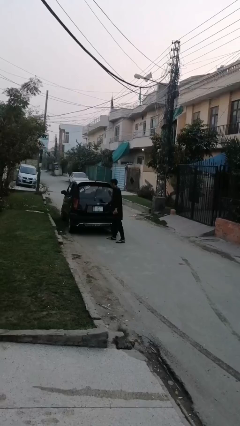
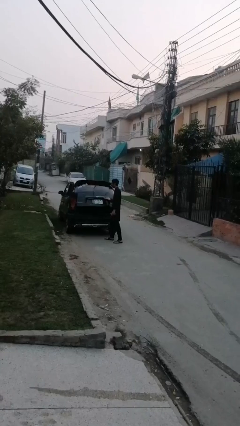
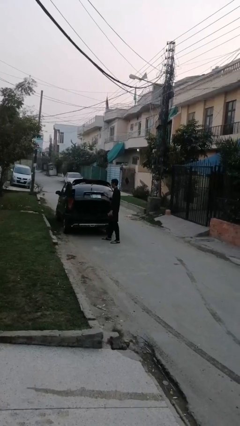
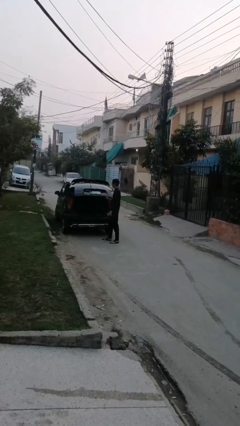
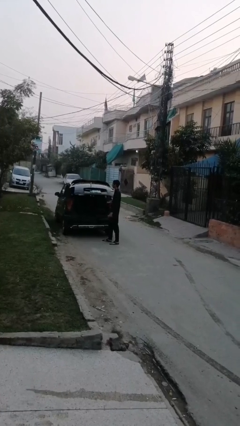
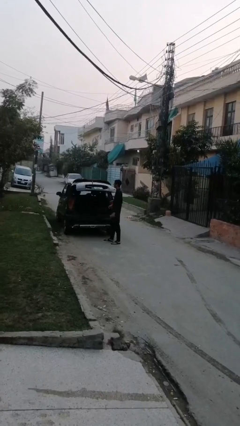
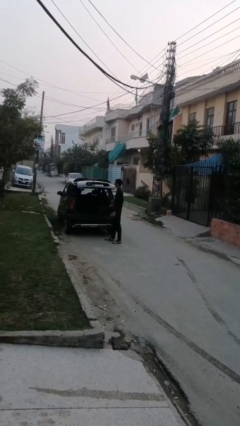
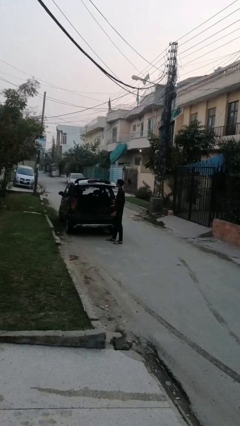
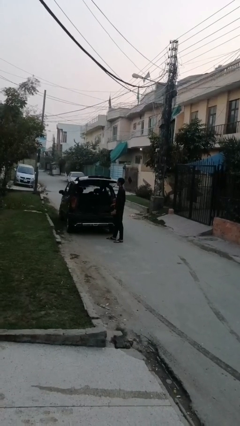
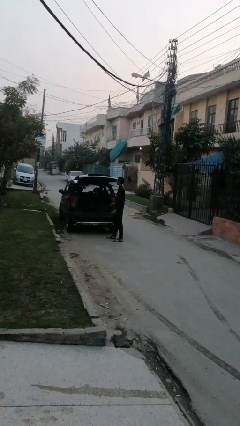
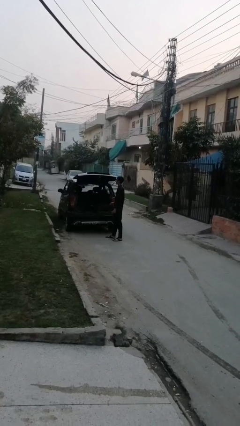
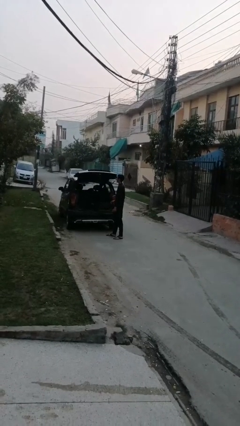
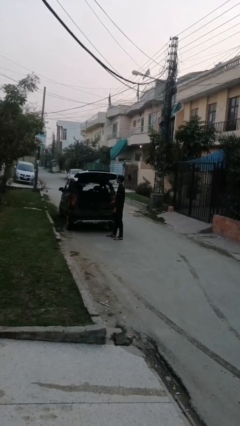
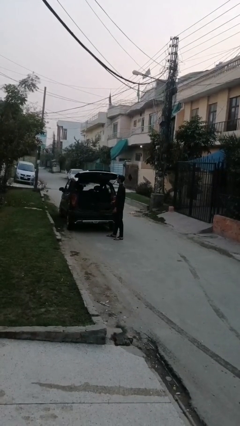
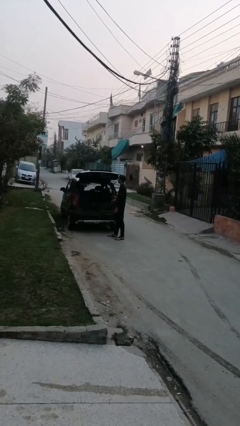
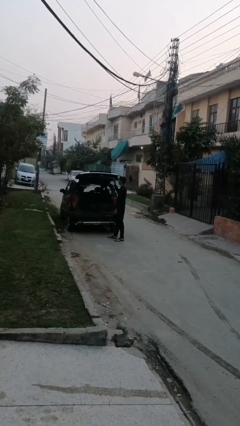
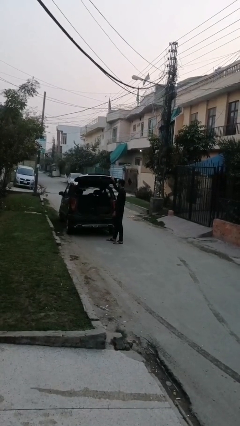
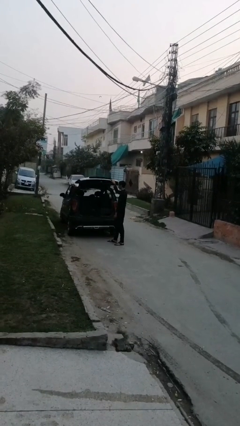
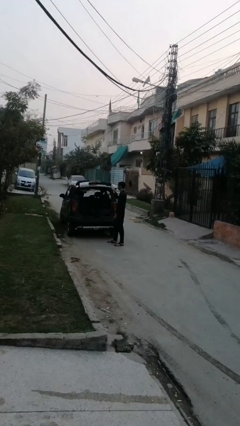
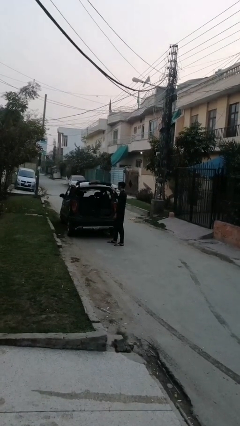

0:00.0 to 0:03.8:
person opens car trunk

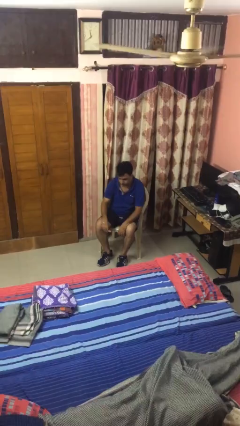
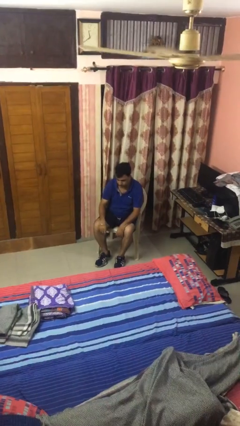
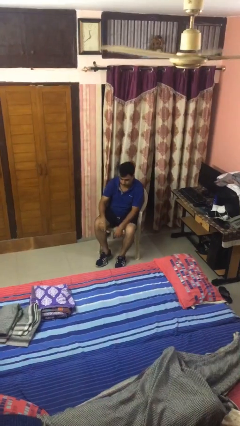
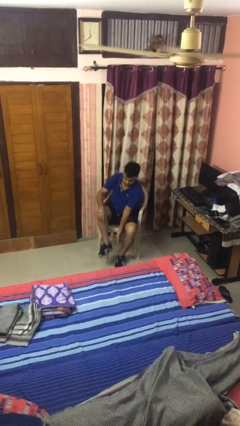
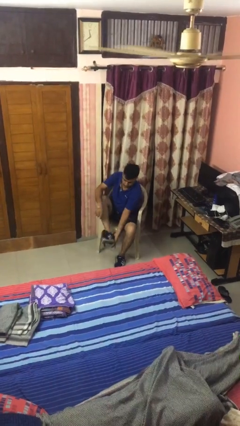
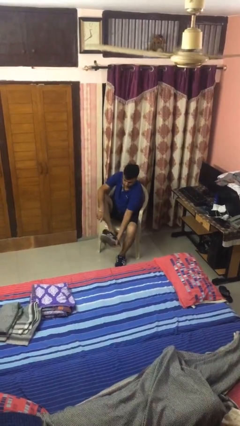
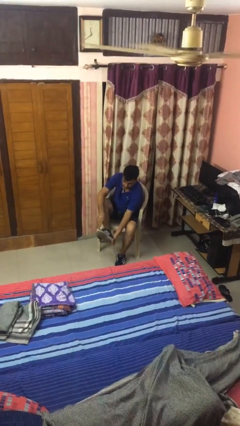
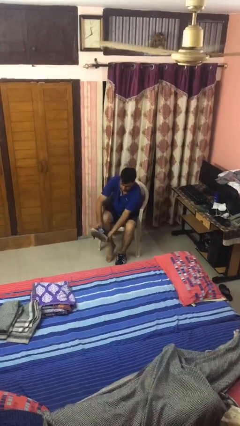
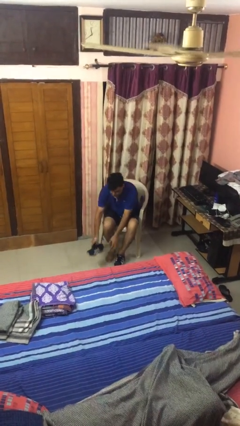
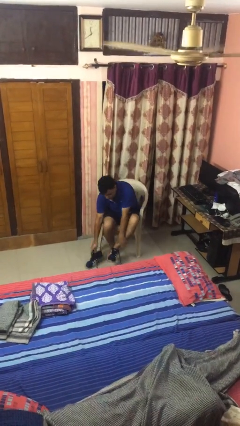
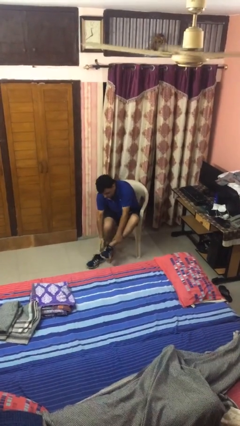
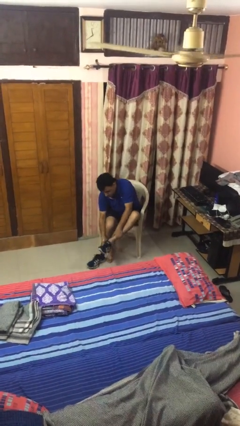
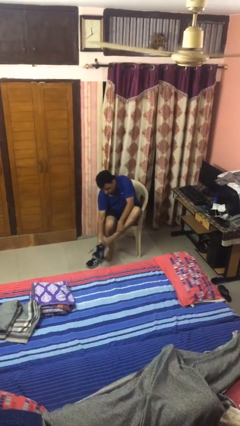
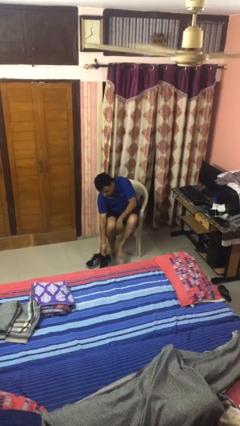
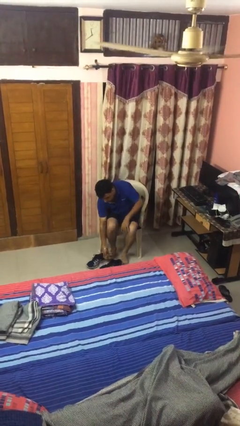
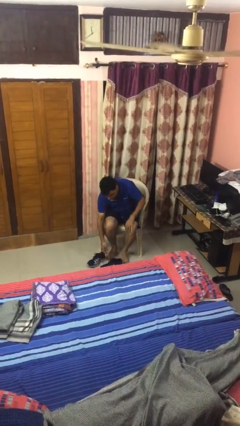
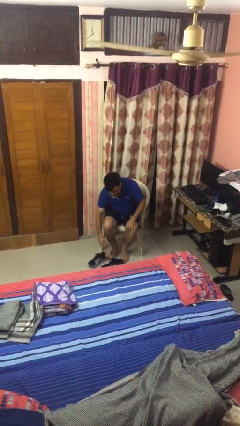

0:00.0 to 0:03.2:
person takes off boots

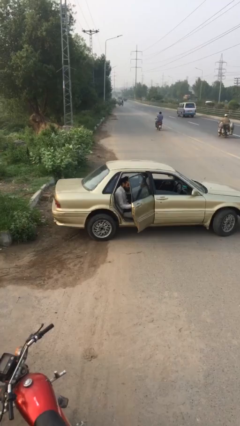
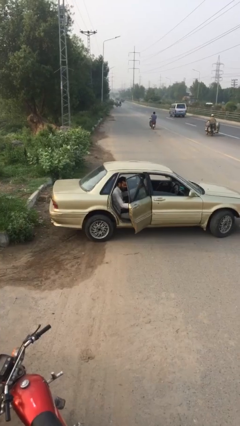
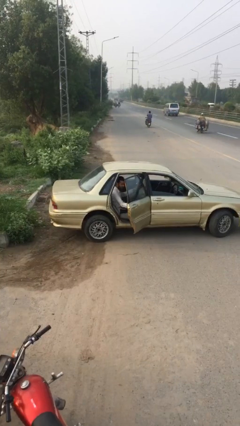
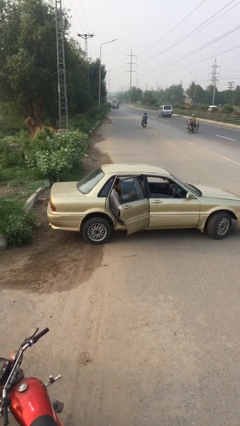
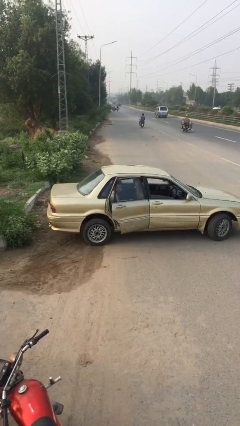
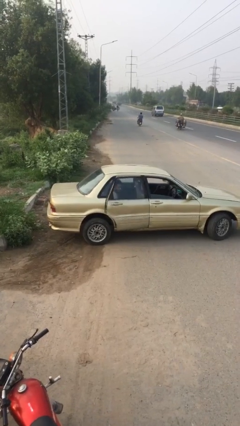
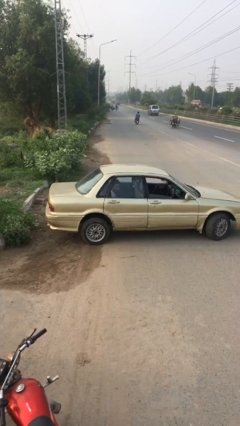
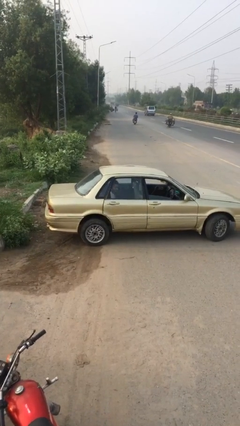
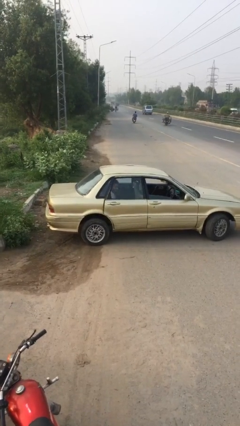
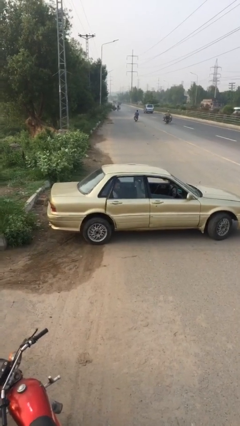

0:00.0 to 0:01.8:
person closes car door

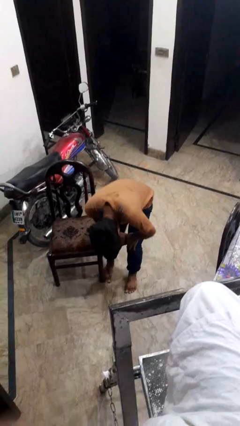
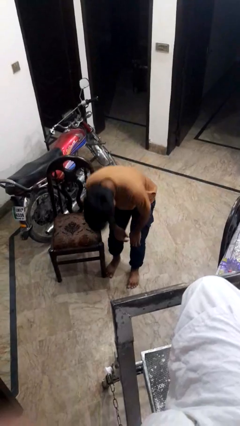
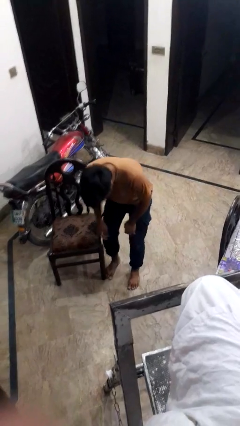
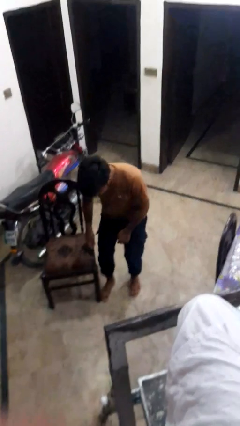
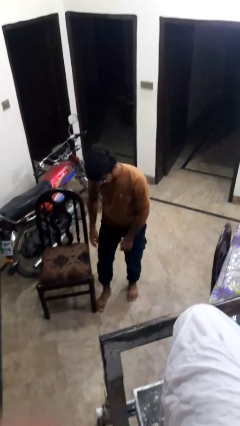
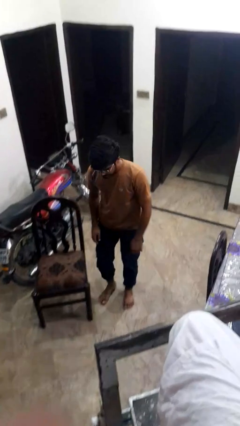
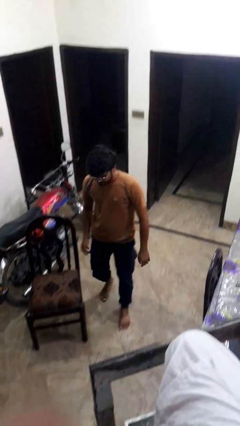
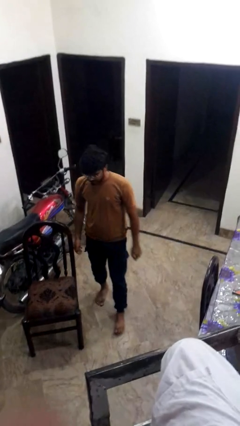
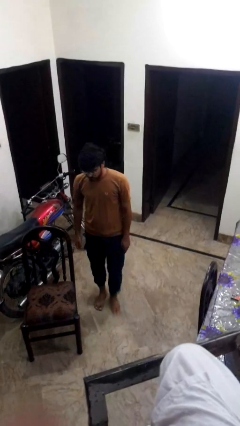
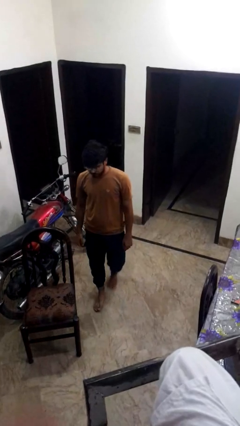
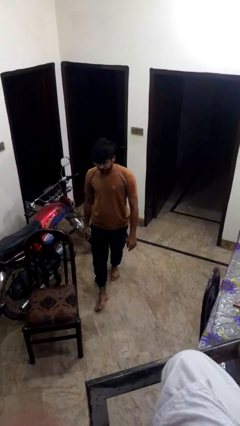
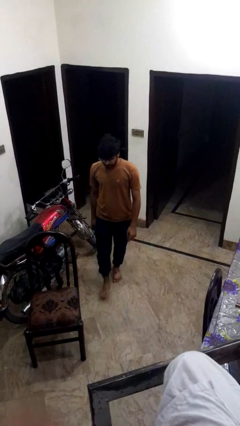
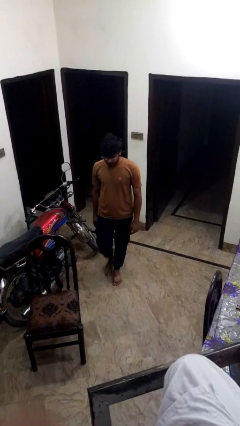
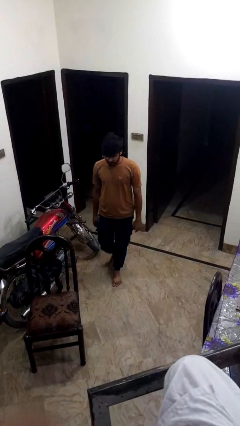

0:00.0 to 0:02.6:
person stubs toe

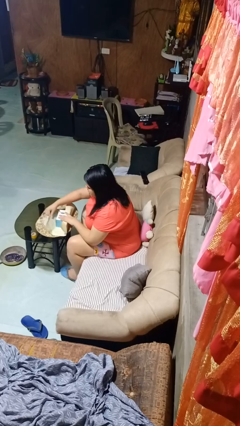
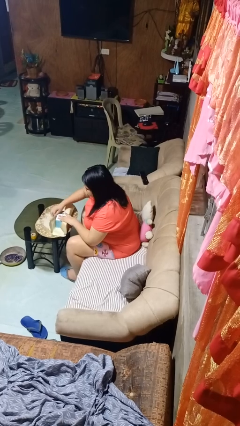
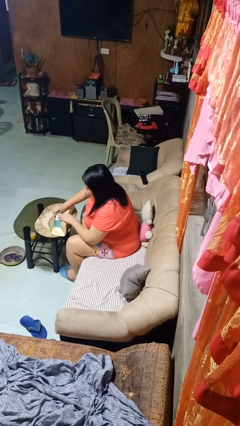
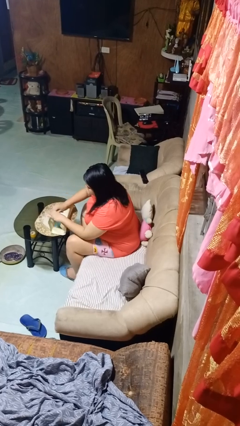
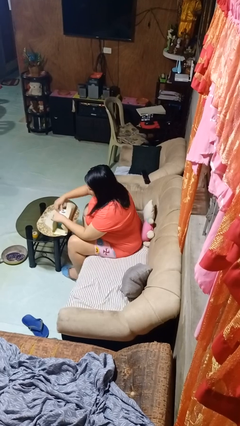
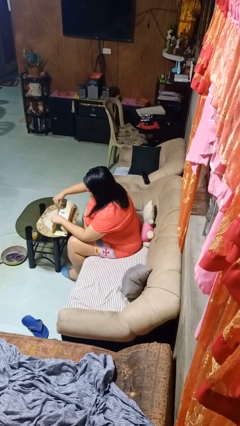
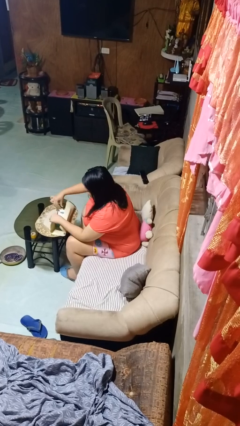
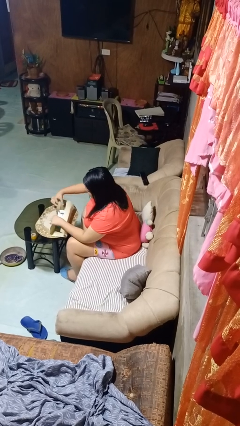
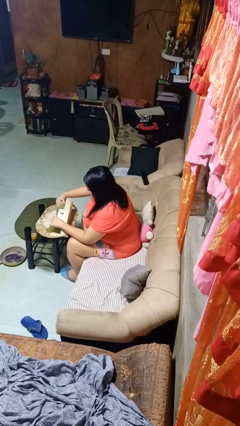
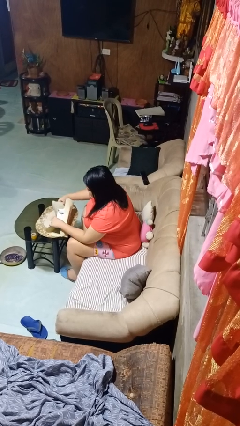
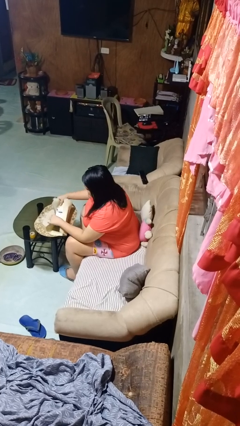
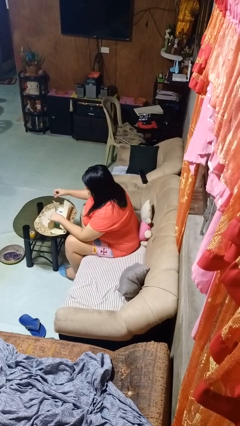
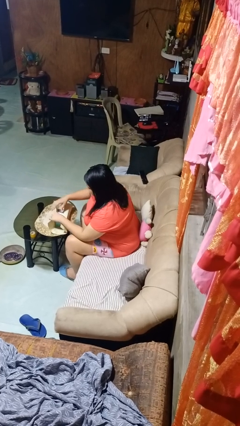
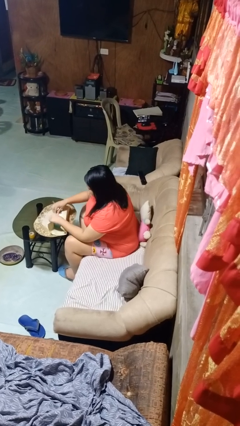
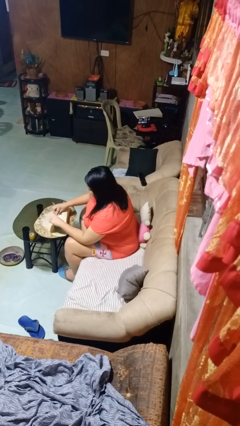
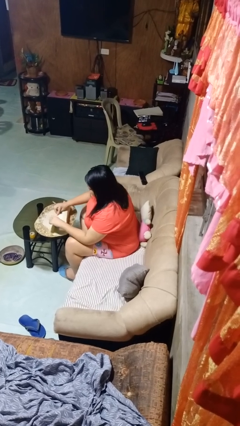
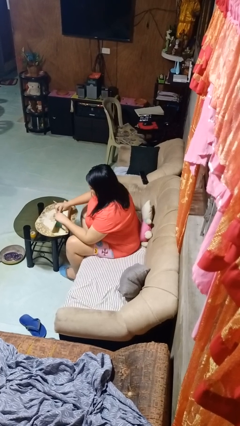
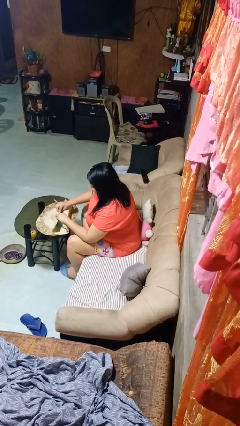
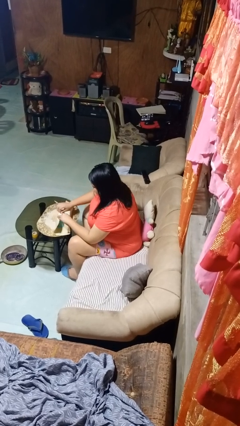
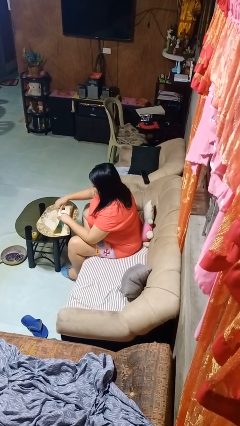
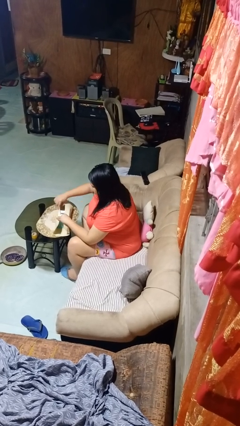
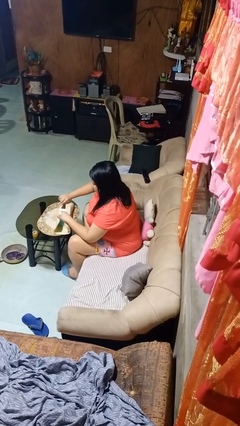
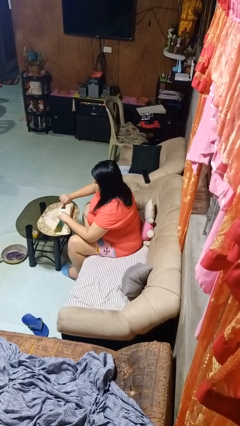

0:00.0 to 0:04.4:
person wraps box

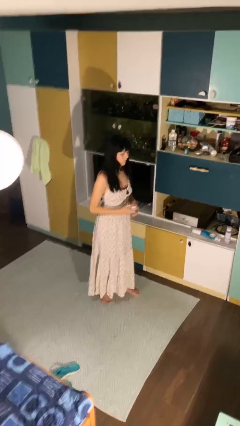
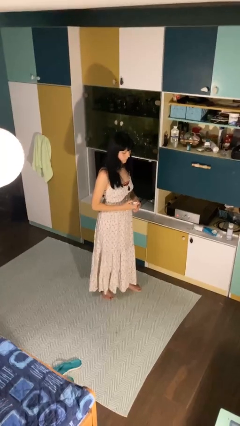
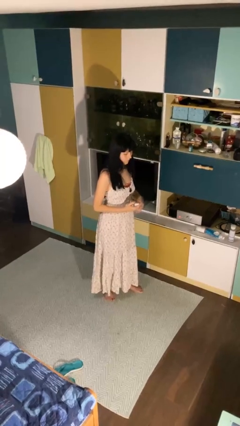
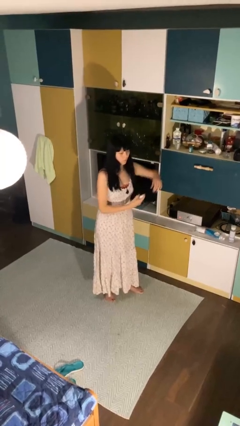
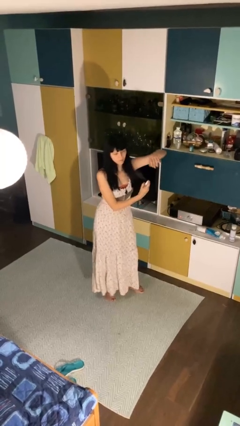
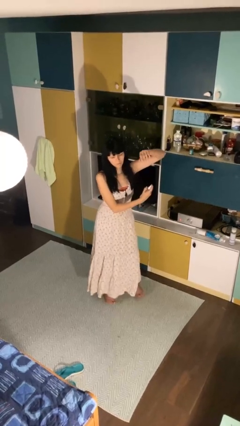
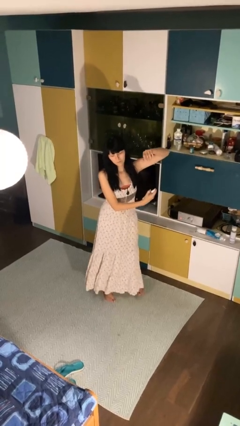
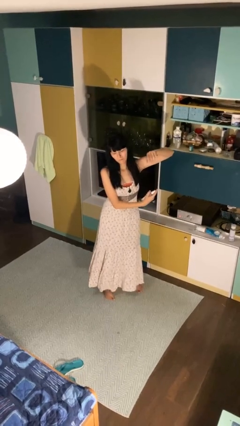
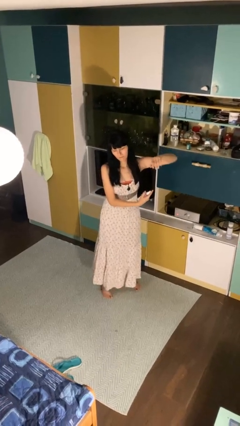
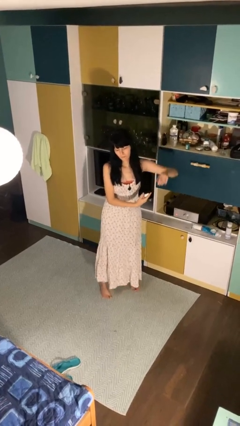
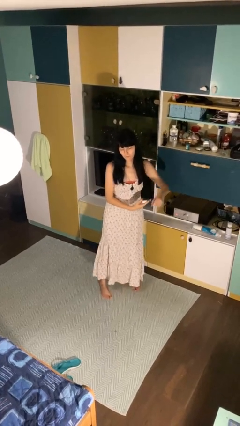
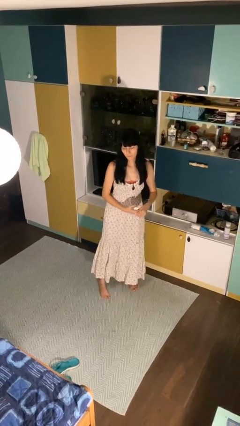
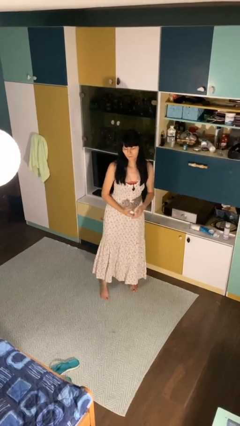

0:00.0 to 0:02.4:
person applies deodorant
